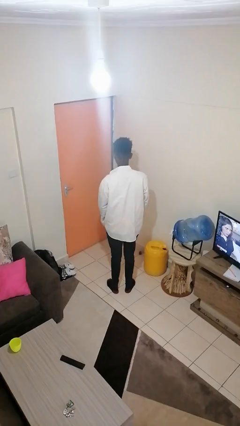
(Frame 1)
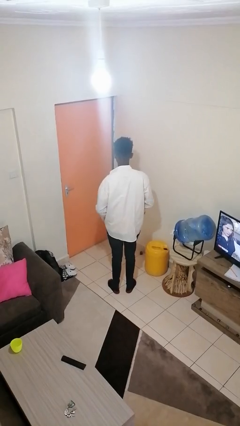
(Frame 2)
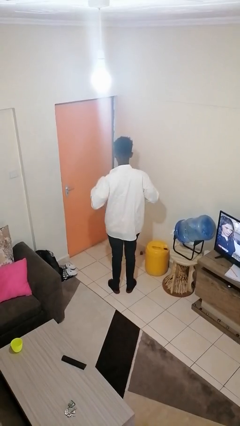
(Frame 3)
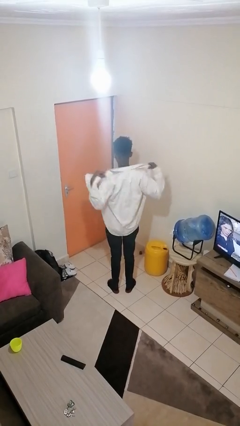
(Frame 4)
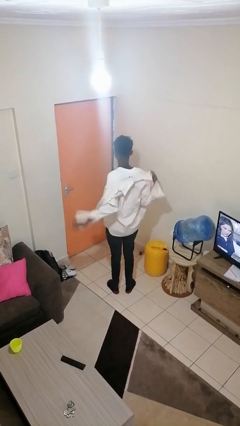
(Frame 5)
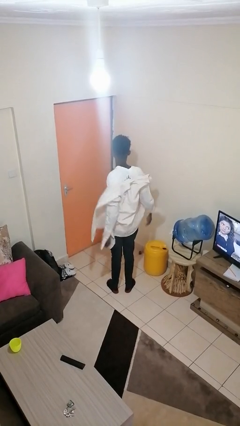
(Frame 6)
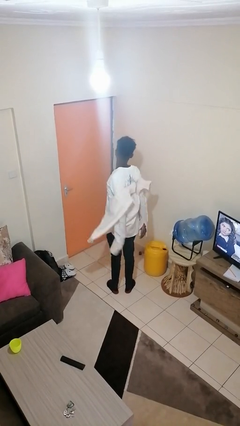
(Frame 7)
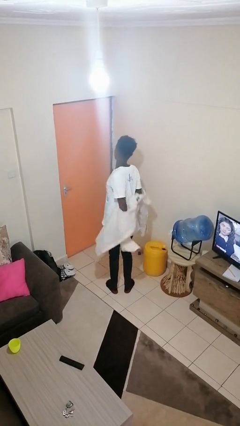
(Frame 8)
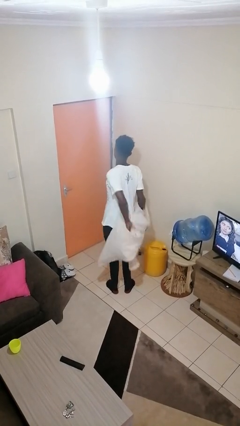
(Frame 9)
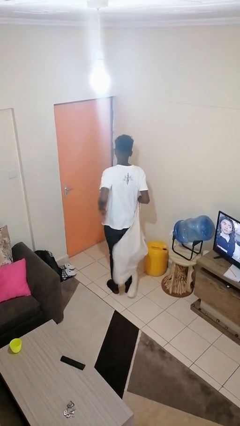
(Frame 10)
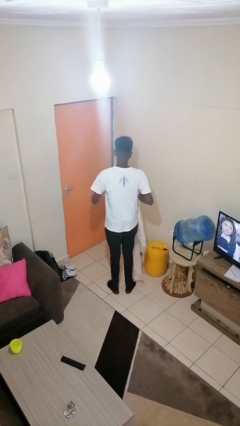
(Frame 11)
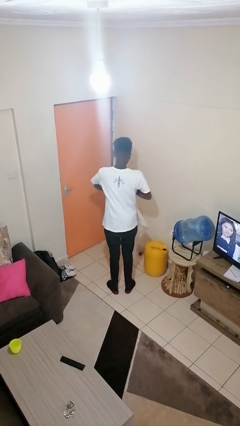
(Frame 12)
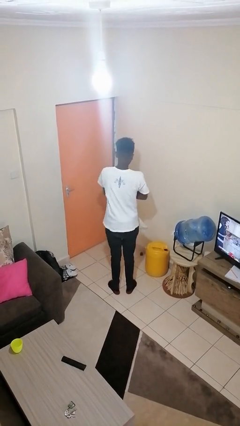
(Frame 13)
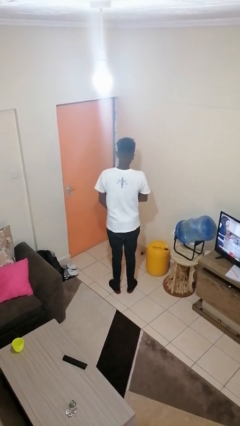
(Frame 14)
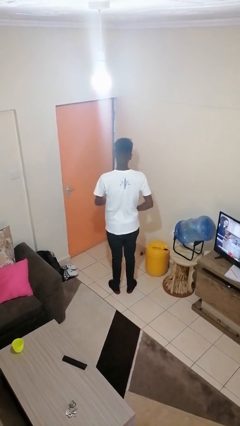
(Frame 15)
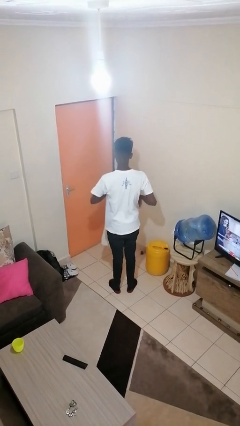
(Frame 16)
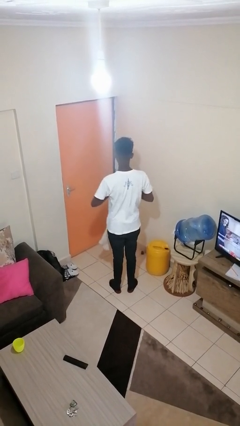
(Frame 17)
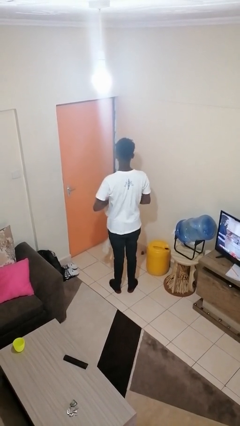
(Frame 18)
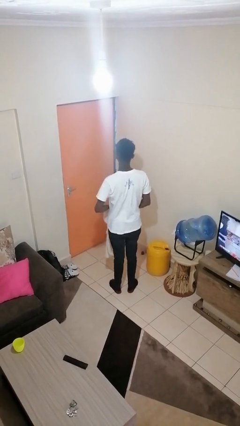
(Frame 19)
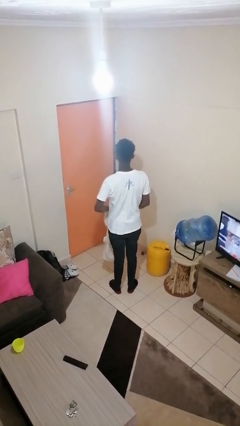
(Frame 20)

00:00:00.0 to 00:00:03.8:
person takes off shirt

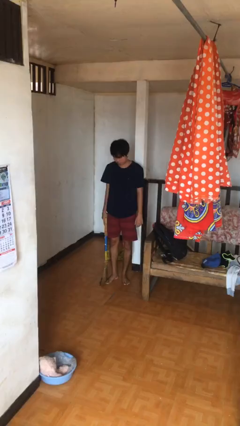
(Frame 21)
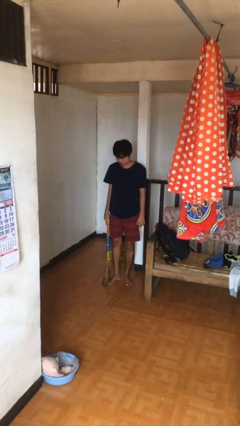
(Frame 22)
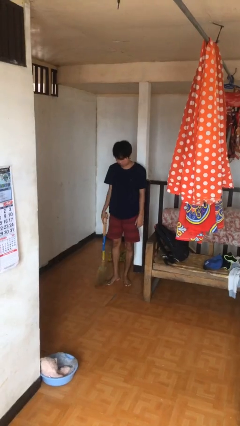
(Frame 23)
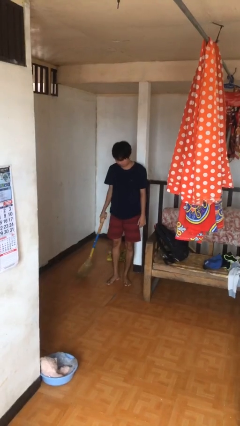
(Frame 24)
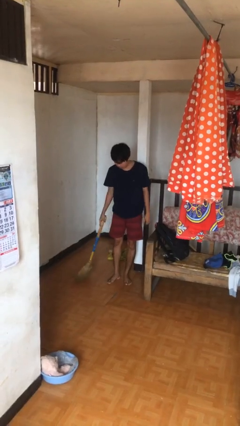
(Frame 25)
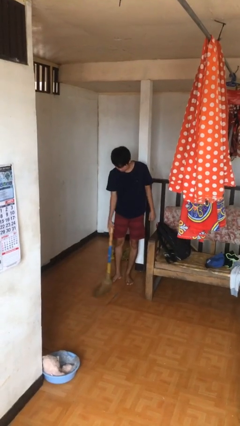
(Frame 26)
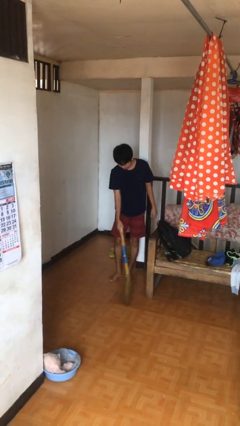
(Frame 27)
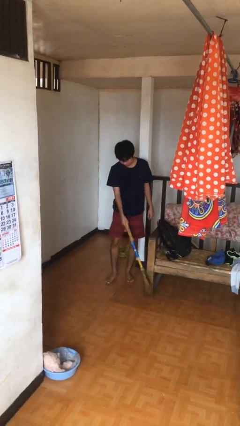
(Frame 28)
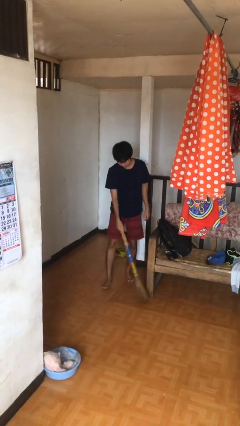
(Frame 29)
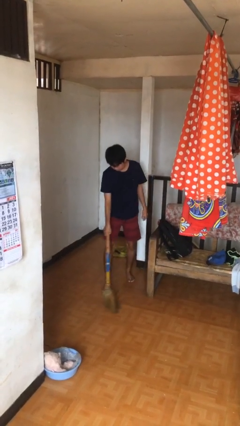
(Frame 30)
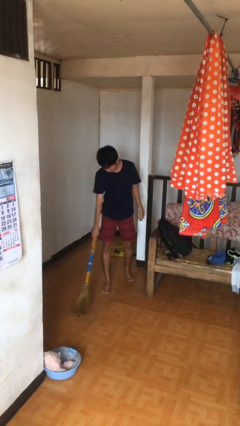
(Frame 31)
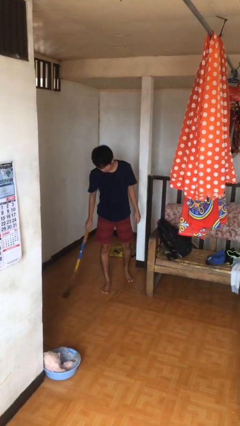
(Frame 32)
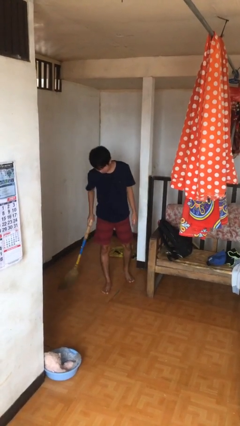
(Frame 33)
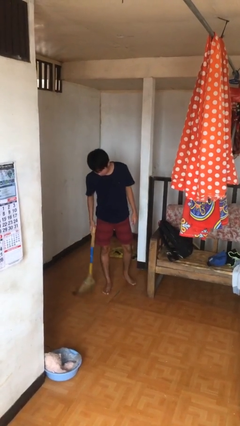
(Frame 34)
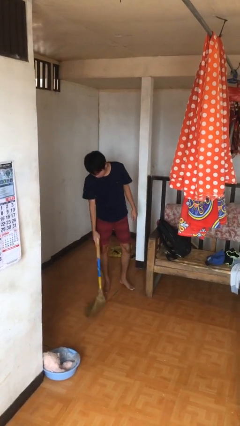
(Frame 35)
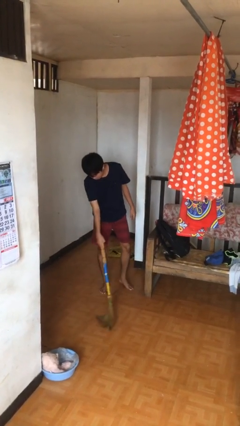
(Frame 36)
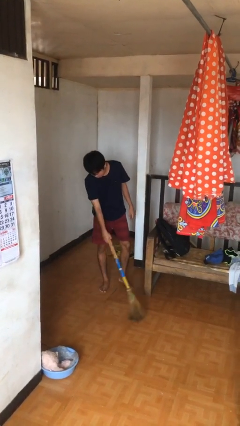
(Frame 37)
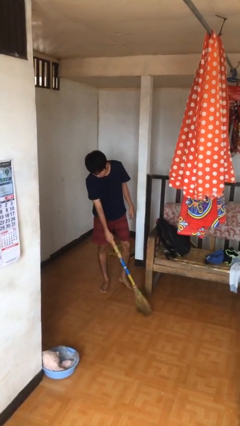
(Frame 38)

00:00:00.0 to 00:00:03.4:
person sweeps floor

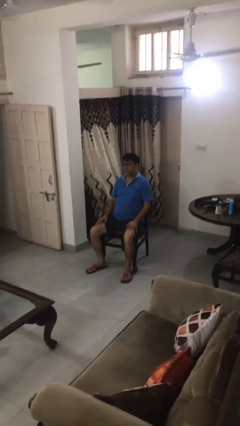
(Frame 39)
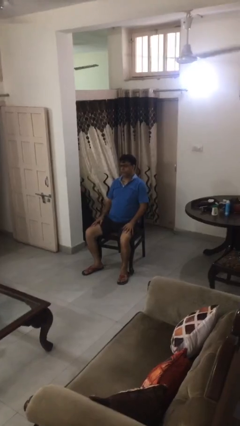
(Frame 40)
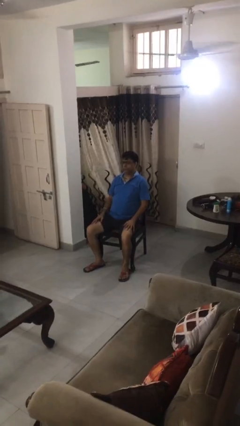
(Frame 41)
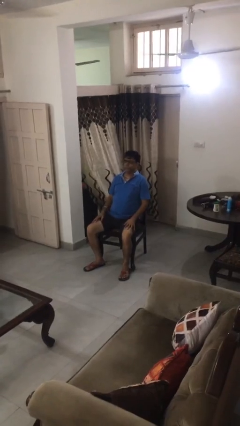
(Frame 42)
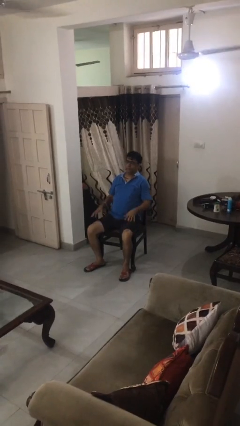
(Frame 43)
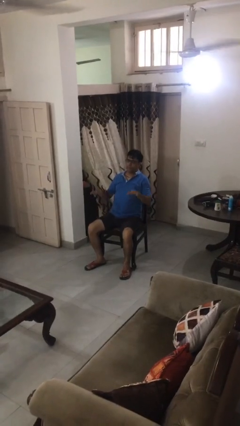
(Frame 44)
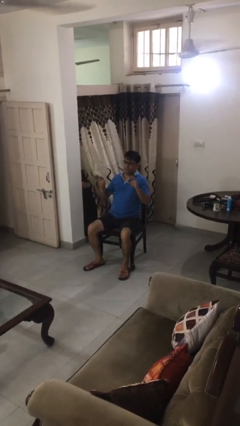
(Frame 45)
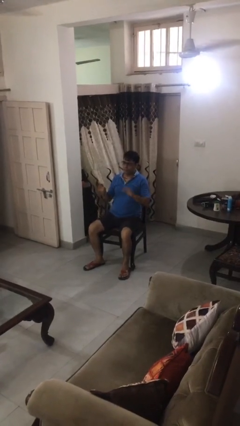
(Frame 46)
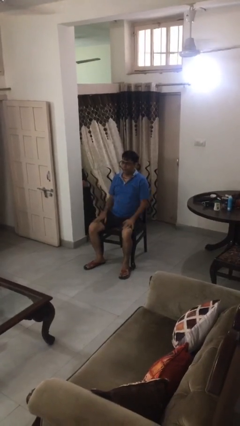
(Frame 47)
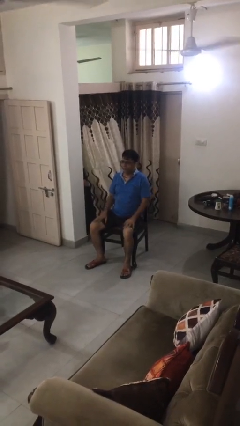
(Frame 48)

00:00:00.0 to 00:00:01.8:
person slaps hands on thighs

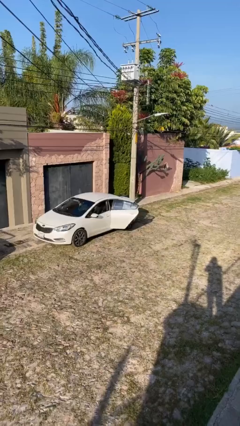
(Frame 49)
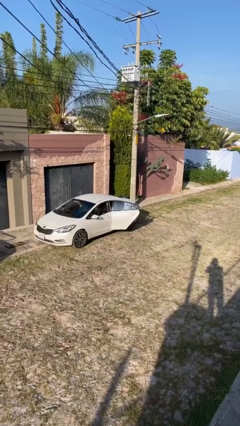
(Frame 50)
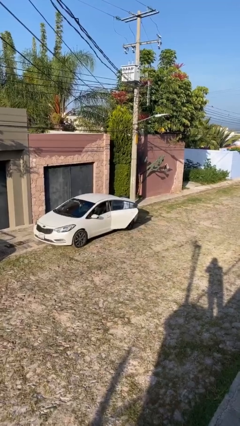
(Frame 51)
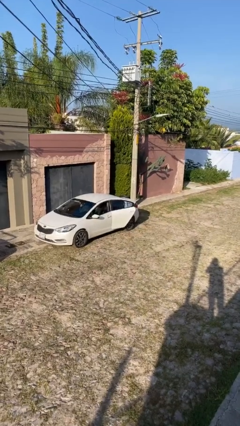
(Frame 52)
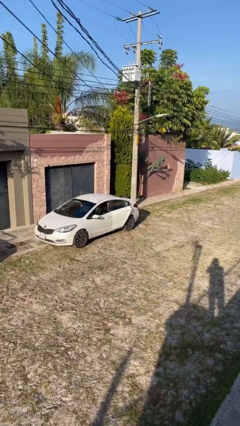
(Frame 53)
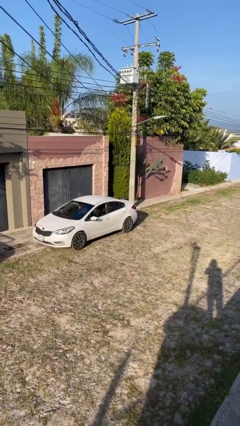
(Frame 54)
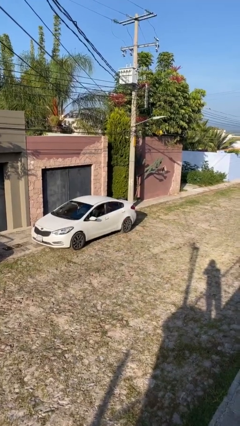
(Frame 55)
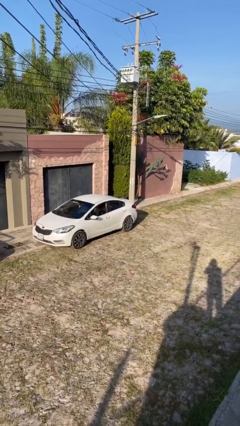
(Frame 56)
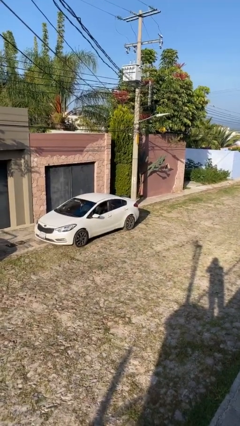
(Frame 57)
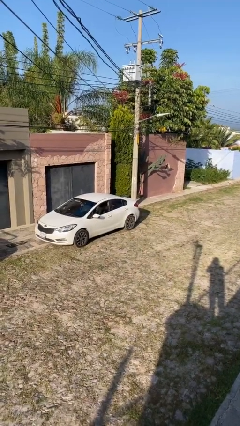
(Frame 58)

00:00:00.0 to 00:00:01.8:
person closes car door

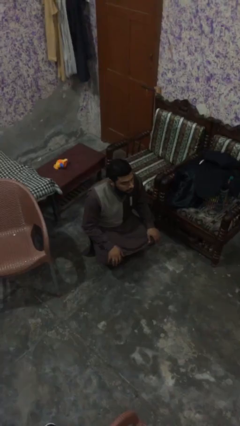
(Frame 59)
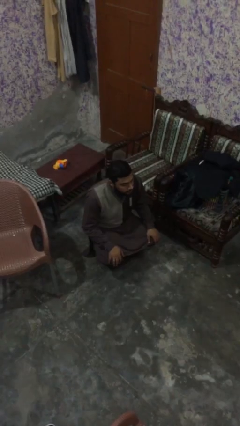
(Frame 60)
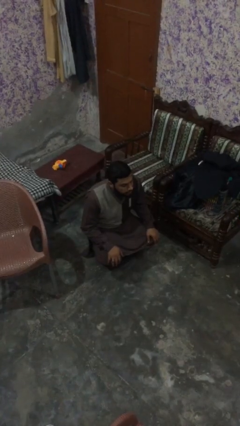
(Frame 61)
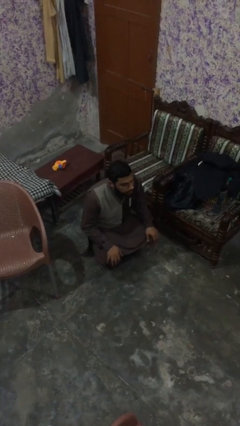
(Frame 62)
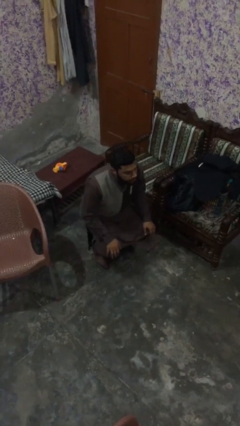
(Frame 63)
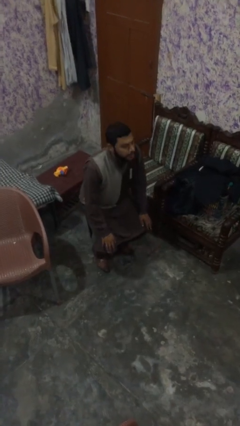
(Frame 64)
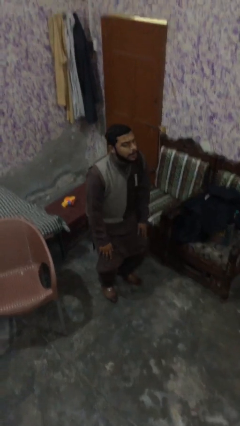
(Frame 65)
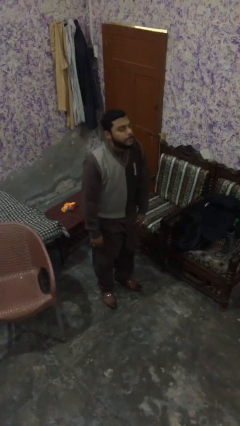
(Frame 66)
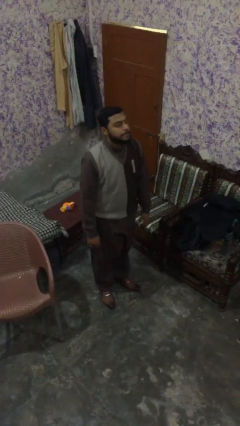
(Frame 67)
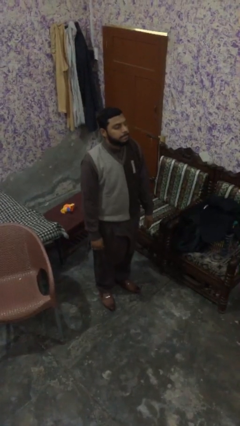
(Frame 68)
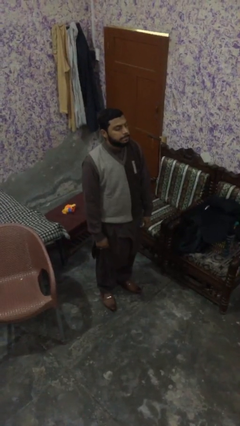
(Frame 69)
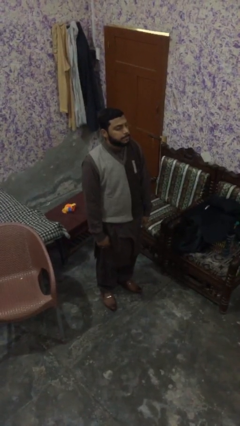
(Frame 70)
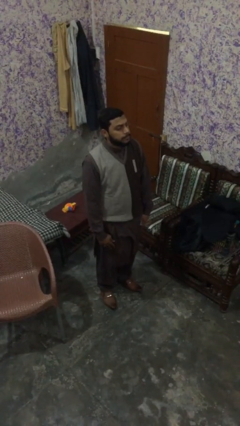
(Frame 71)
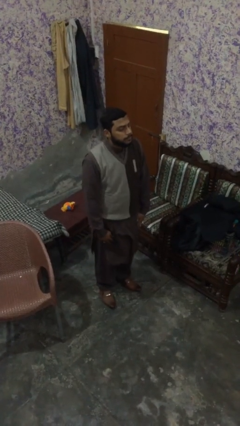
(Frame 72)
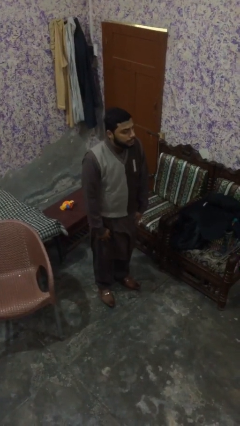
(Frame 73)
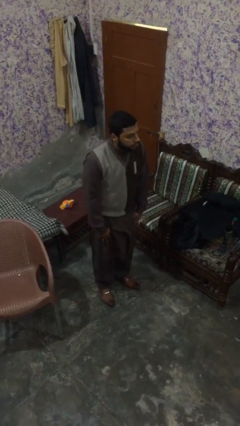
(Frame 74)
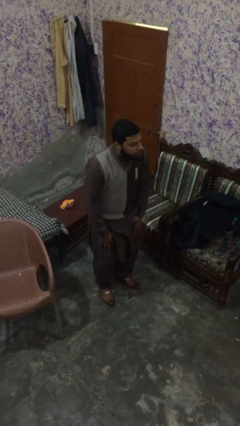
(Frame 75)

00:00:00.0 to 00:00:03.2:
person stands up

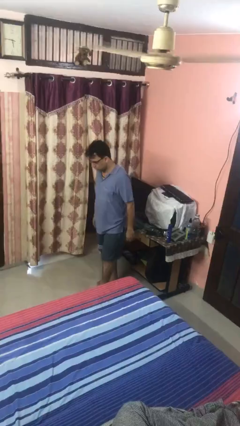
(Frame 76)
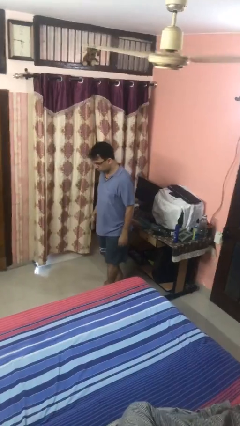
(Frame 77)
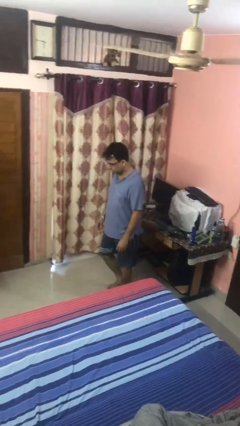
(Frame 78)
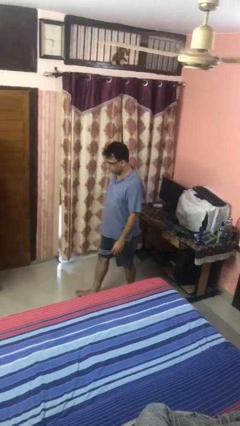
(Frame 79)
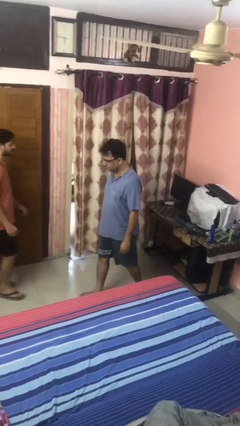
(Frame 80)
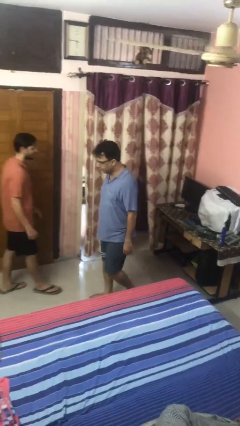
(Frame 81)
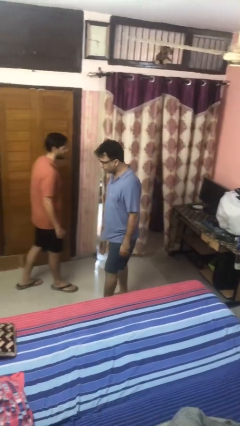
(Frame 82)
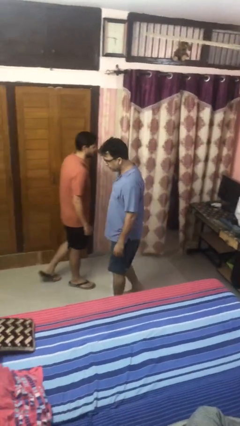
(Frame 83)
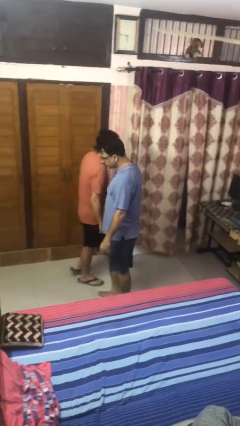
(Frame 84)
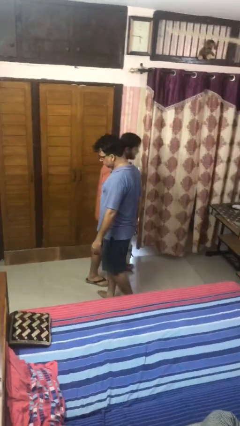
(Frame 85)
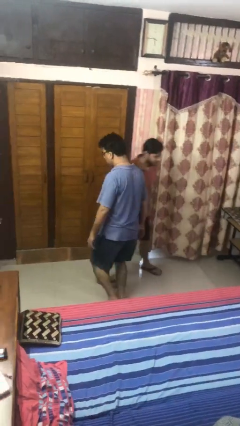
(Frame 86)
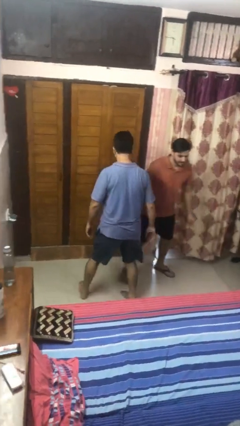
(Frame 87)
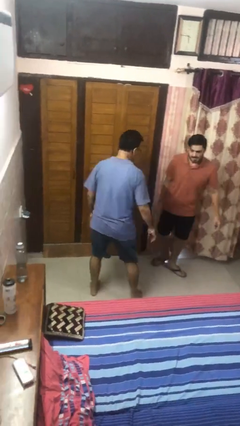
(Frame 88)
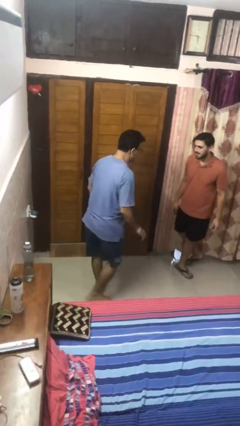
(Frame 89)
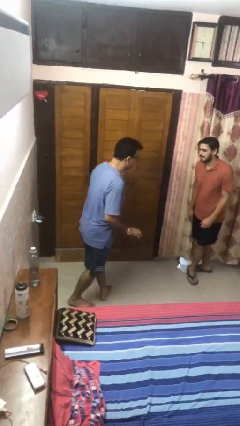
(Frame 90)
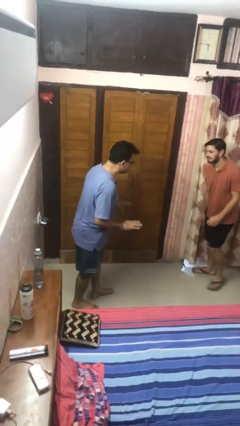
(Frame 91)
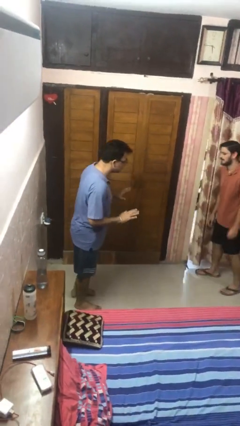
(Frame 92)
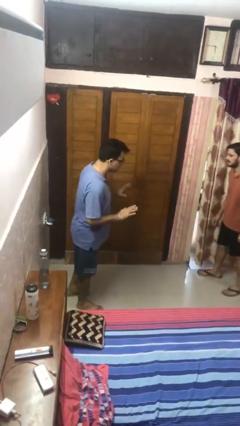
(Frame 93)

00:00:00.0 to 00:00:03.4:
person bumps into person
